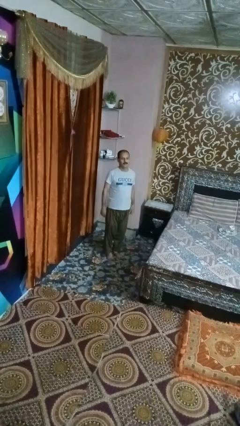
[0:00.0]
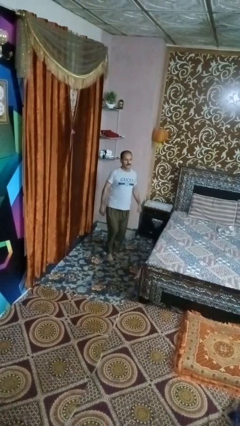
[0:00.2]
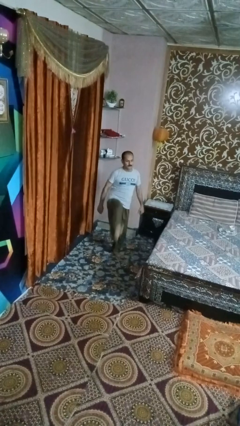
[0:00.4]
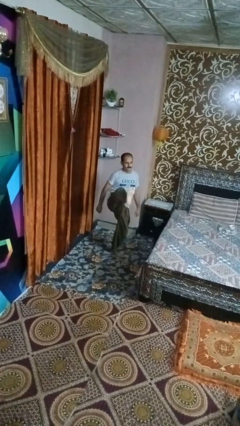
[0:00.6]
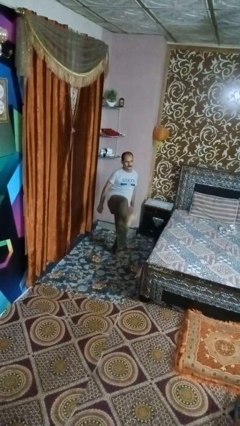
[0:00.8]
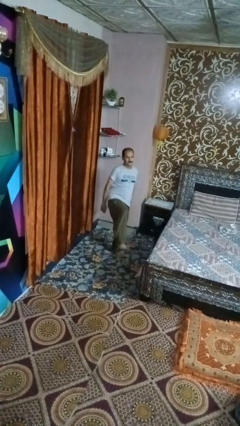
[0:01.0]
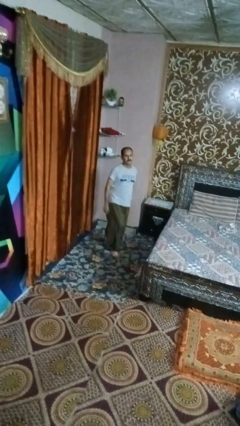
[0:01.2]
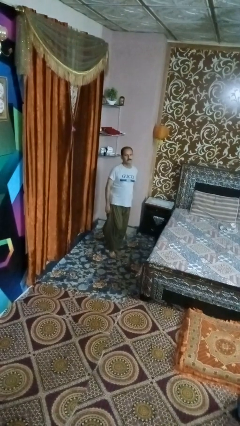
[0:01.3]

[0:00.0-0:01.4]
person karate kicks

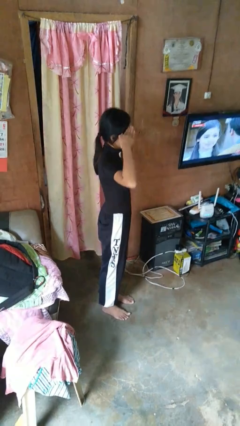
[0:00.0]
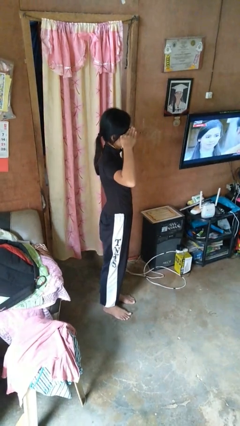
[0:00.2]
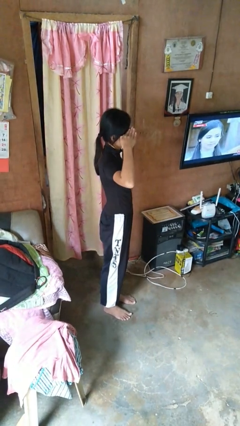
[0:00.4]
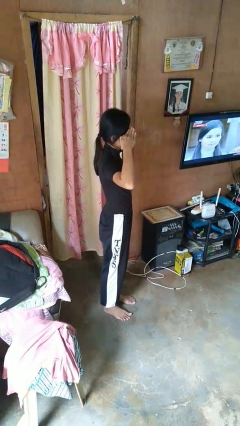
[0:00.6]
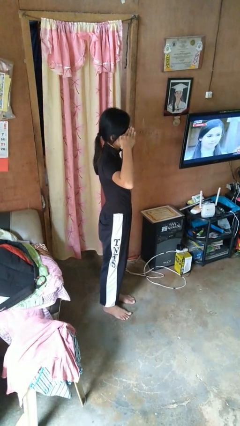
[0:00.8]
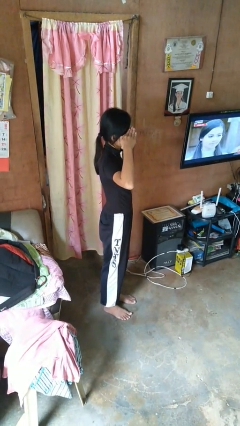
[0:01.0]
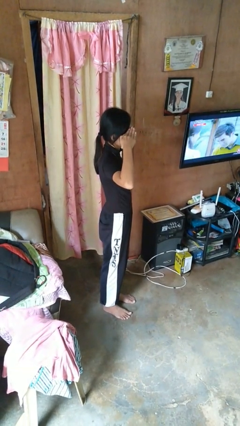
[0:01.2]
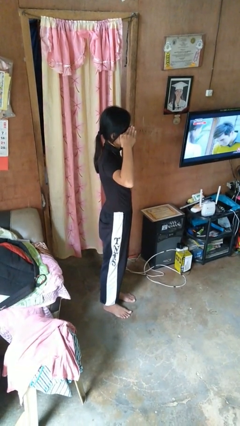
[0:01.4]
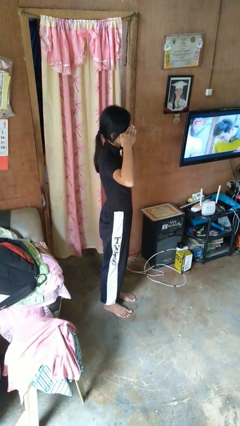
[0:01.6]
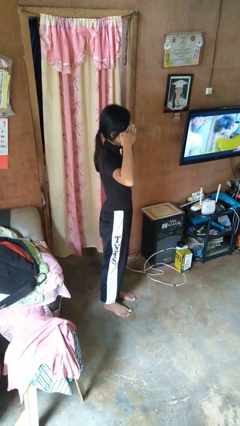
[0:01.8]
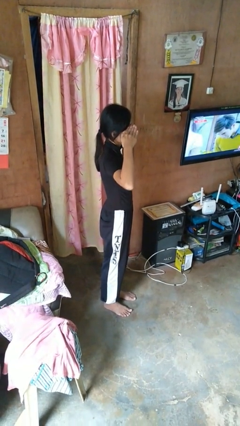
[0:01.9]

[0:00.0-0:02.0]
person salutes

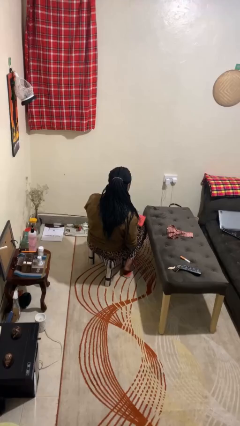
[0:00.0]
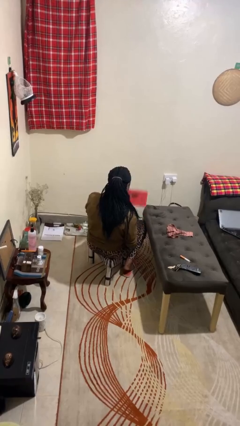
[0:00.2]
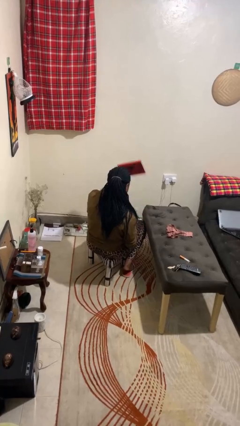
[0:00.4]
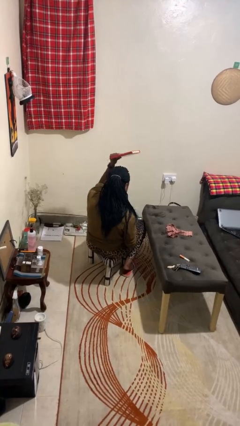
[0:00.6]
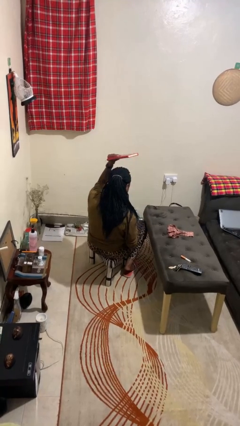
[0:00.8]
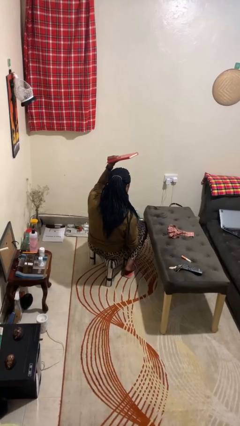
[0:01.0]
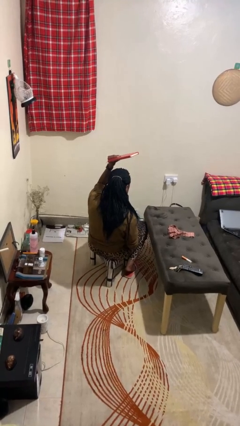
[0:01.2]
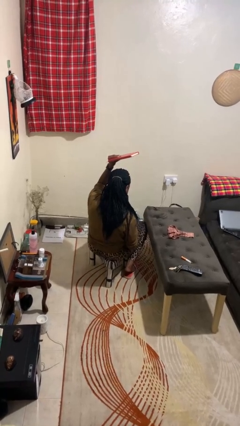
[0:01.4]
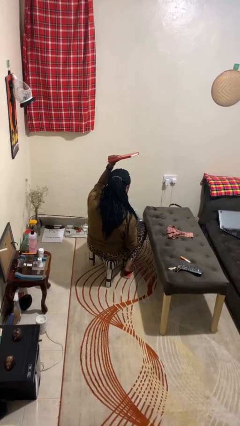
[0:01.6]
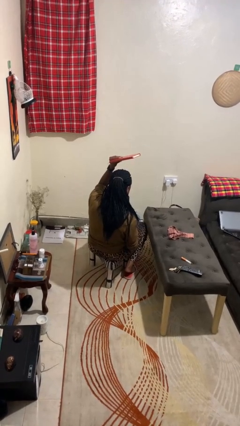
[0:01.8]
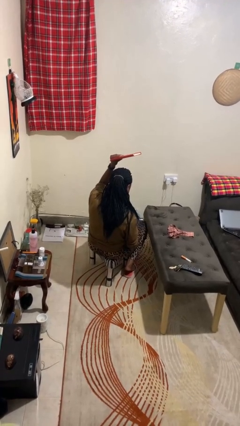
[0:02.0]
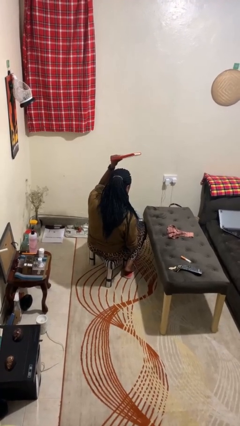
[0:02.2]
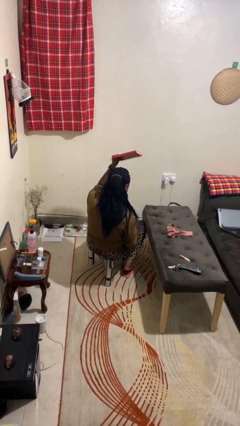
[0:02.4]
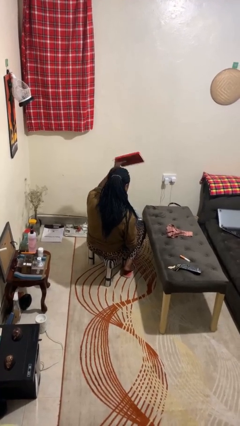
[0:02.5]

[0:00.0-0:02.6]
person holds object above head

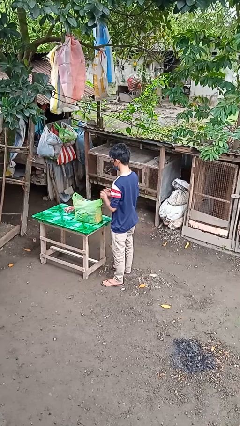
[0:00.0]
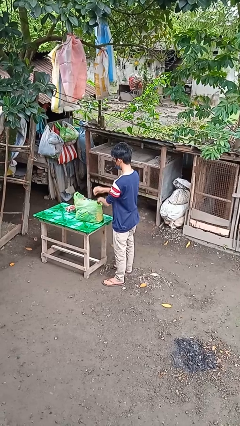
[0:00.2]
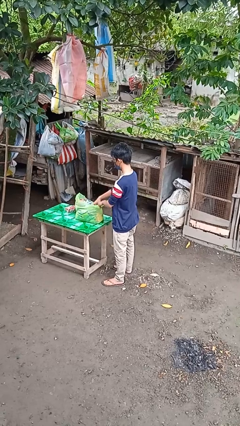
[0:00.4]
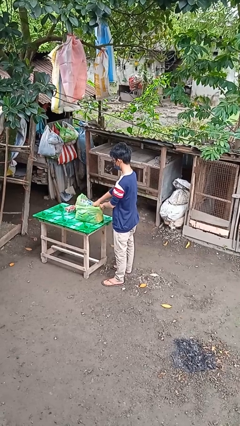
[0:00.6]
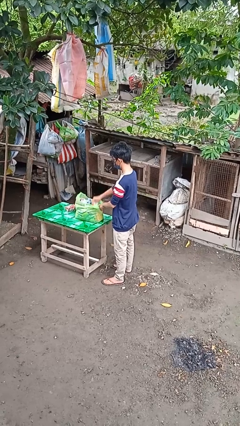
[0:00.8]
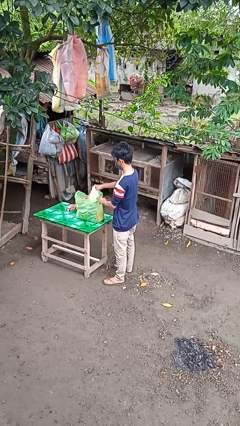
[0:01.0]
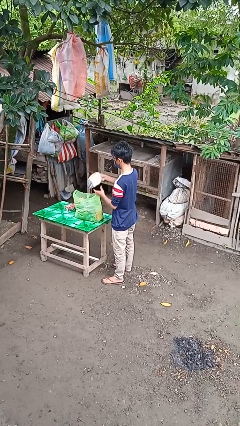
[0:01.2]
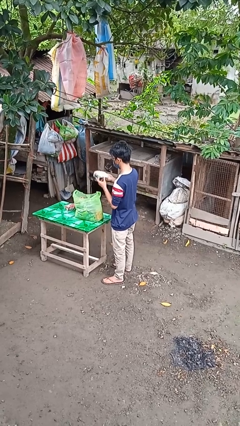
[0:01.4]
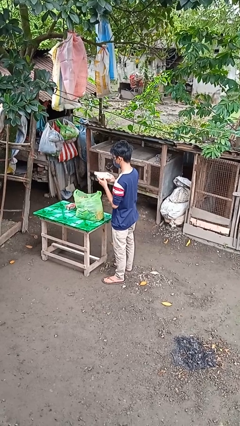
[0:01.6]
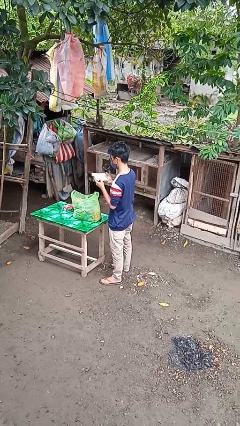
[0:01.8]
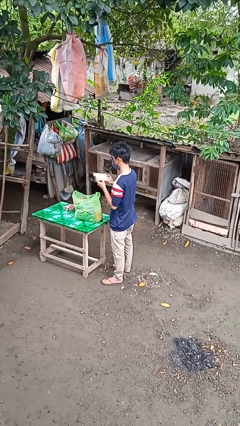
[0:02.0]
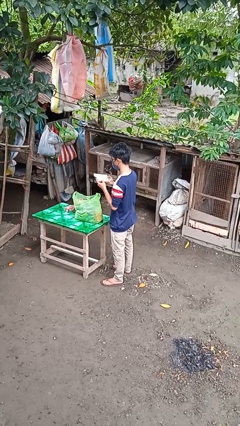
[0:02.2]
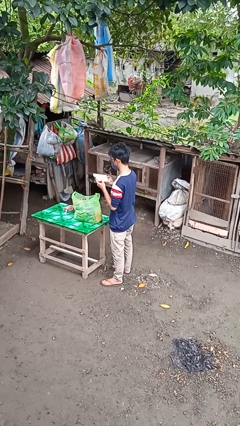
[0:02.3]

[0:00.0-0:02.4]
person takes object from bag

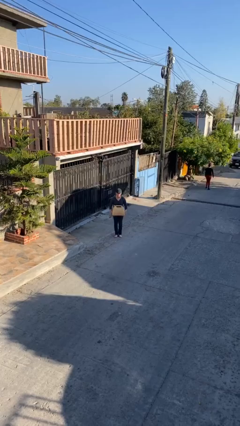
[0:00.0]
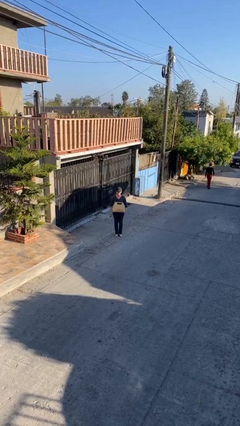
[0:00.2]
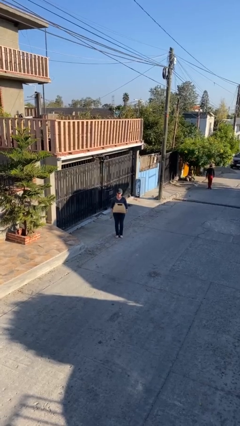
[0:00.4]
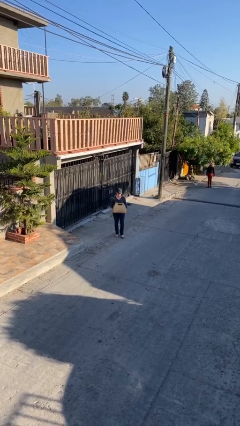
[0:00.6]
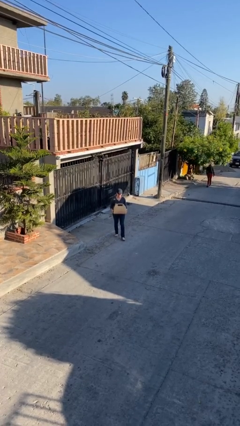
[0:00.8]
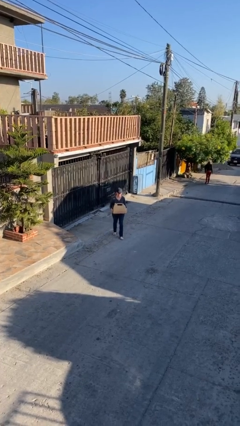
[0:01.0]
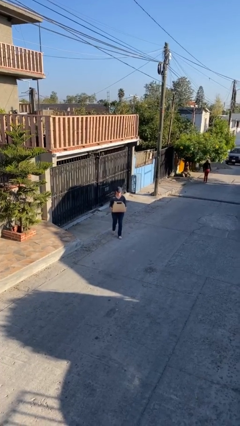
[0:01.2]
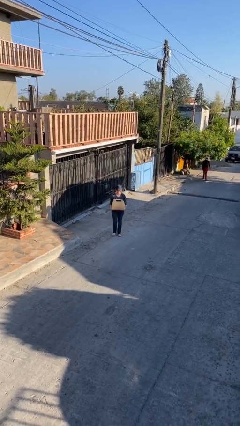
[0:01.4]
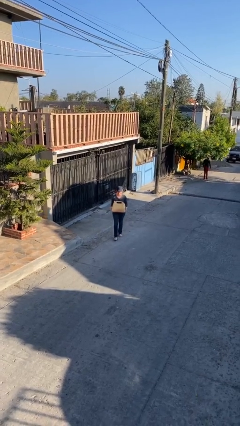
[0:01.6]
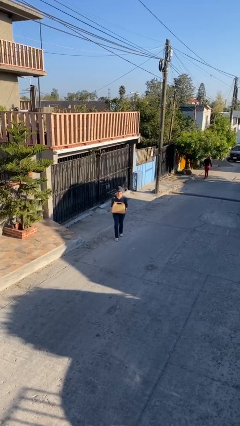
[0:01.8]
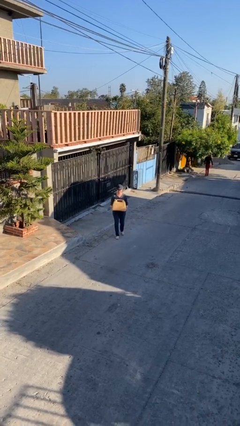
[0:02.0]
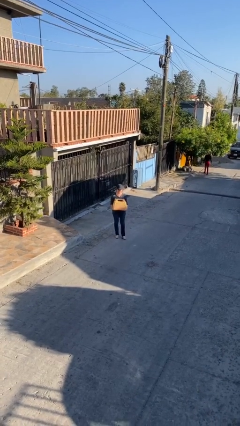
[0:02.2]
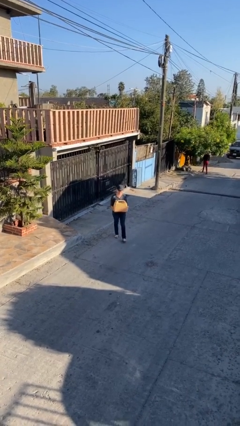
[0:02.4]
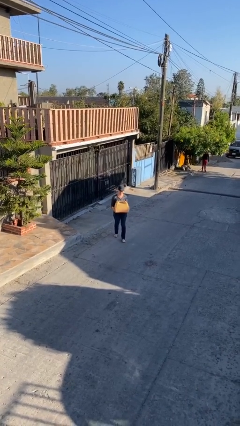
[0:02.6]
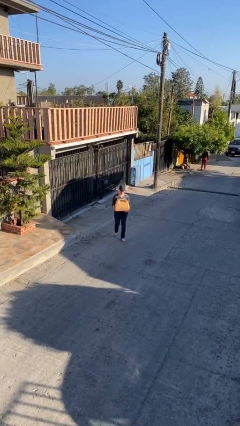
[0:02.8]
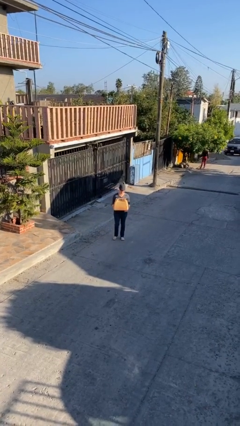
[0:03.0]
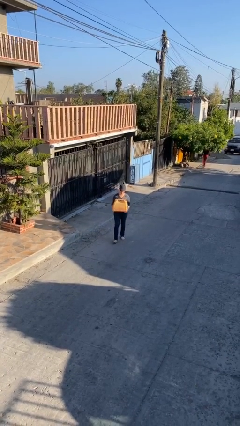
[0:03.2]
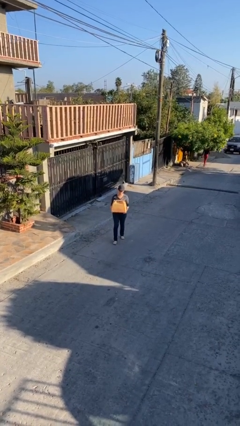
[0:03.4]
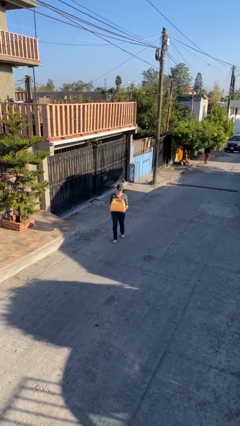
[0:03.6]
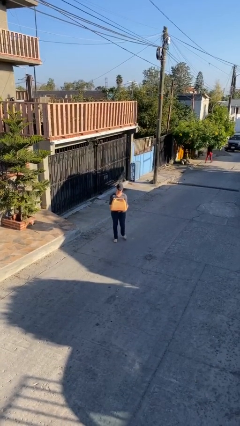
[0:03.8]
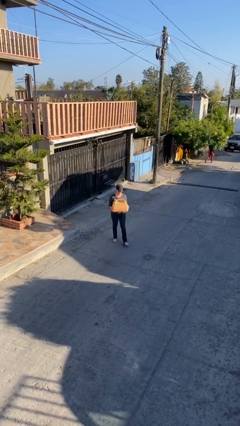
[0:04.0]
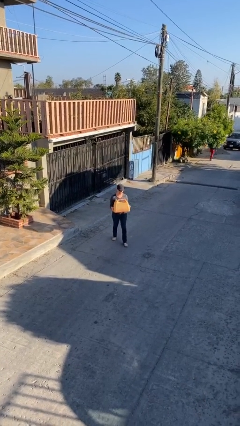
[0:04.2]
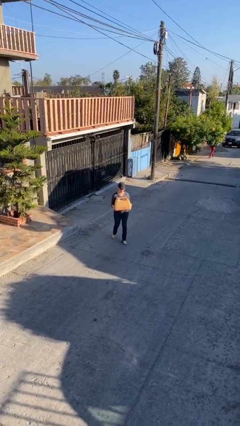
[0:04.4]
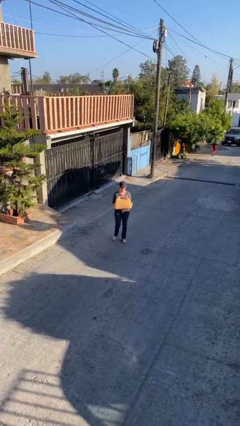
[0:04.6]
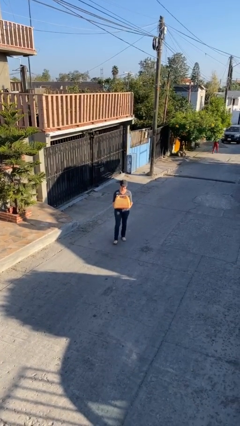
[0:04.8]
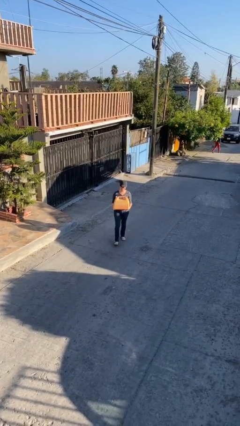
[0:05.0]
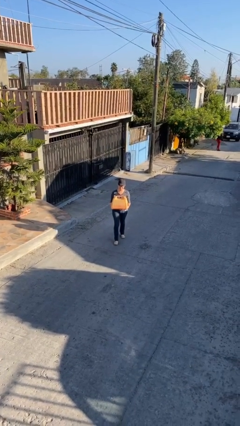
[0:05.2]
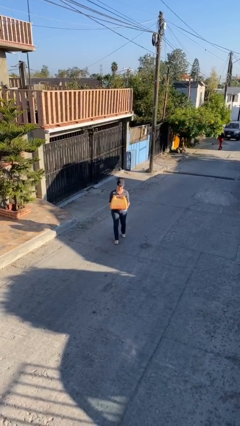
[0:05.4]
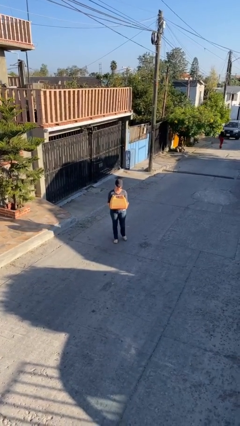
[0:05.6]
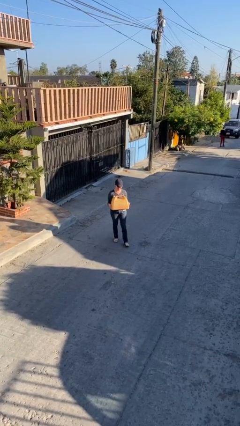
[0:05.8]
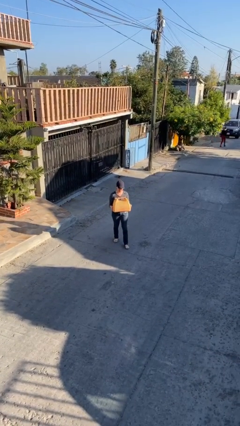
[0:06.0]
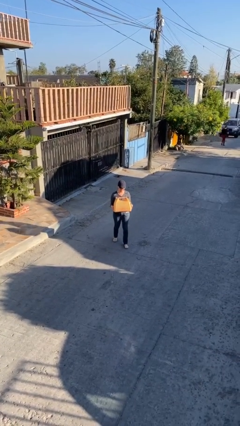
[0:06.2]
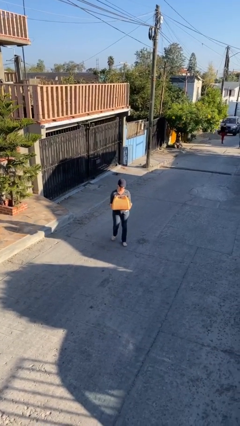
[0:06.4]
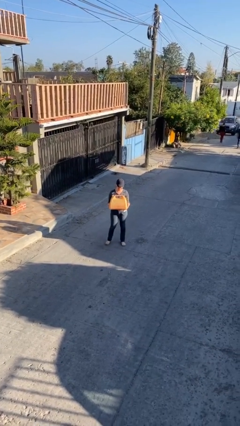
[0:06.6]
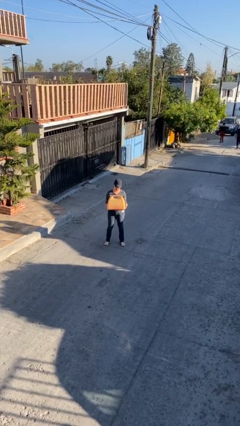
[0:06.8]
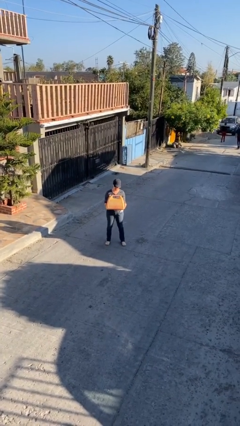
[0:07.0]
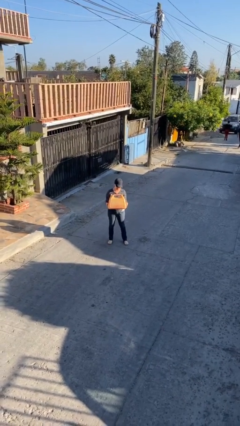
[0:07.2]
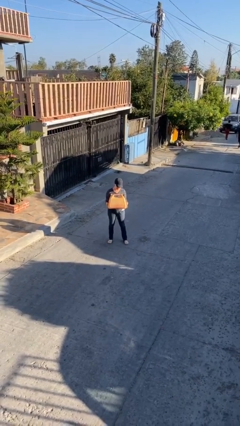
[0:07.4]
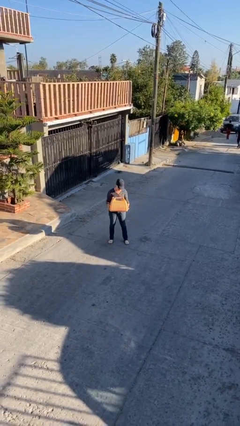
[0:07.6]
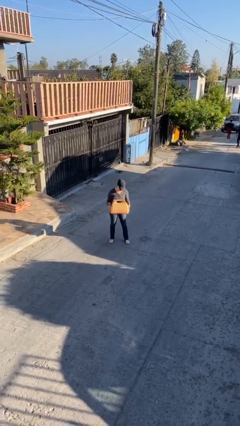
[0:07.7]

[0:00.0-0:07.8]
person carries heavy object

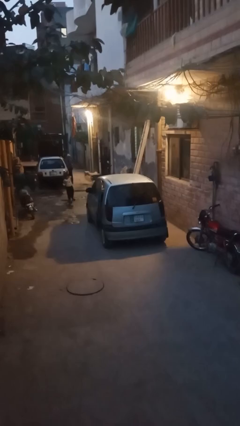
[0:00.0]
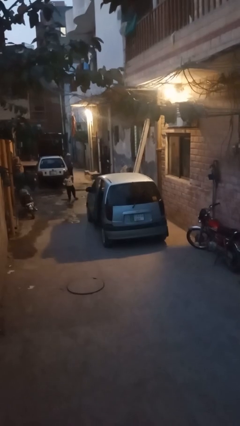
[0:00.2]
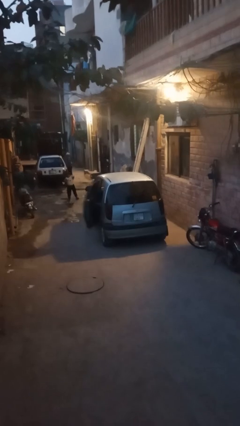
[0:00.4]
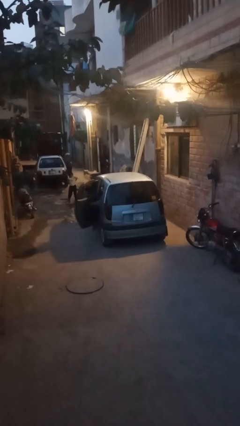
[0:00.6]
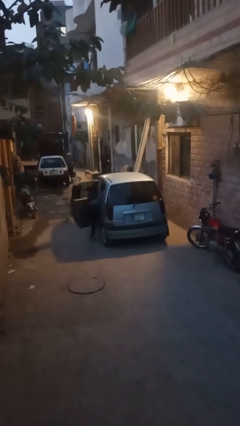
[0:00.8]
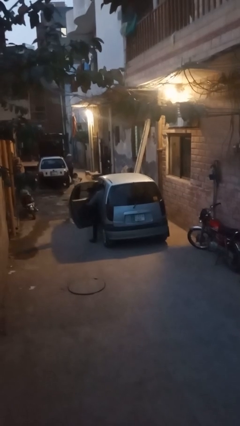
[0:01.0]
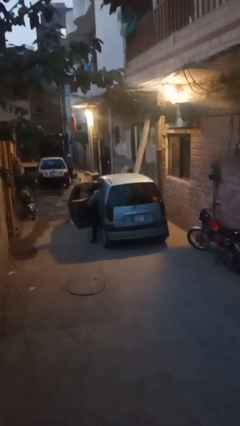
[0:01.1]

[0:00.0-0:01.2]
car drops off person
